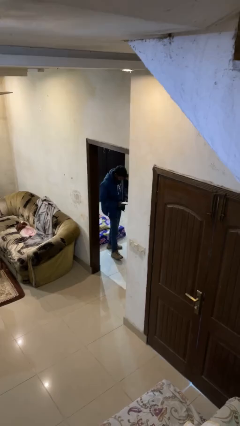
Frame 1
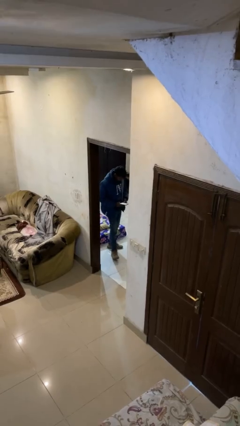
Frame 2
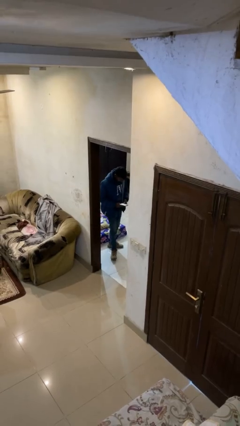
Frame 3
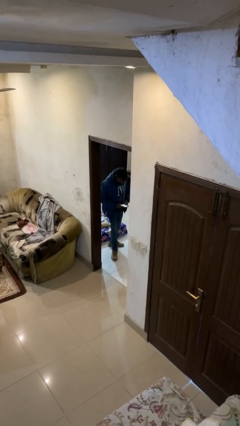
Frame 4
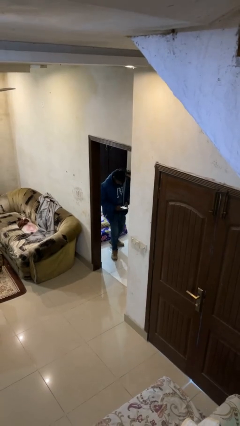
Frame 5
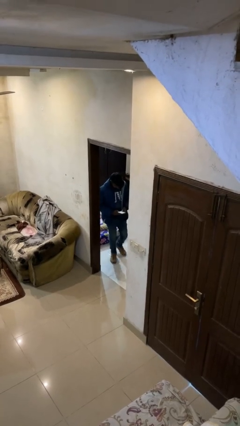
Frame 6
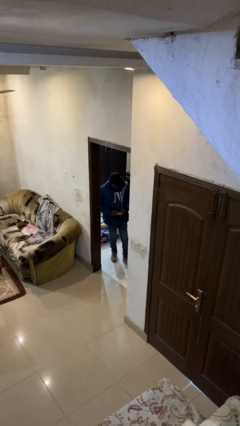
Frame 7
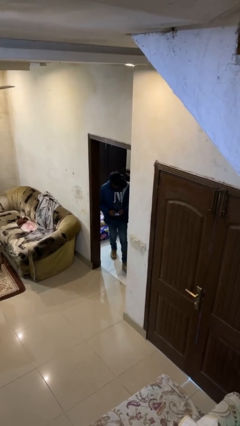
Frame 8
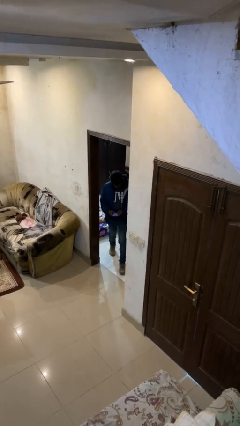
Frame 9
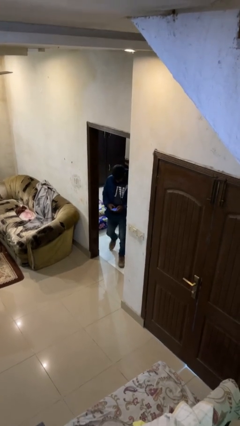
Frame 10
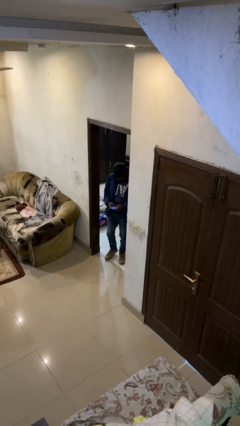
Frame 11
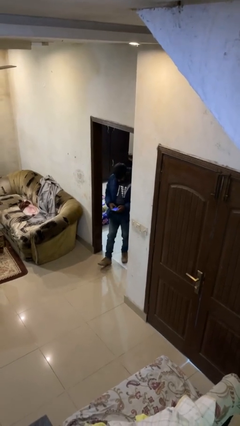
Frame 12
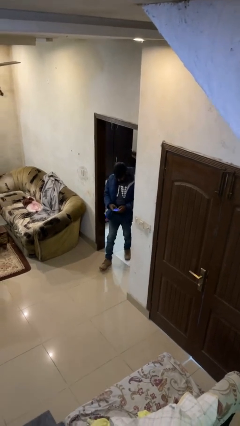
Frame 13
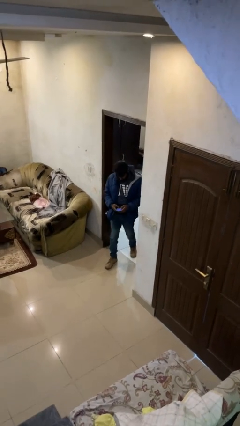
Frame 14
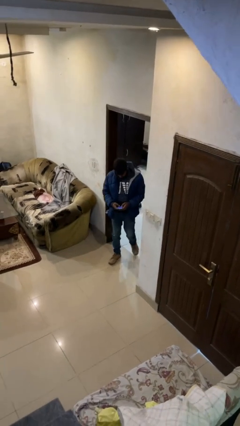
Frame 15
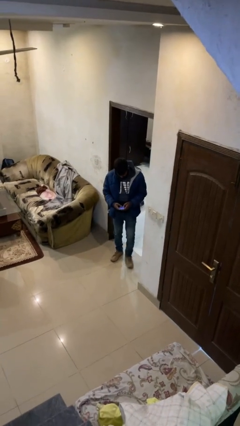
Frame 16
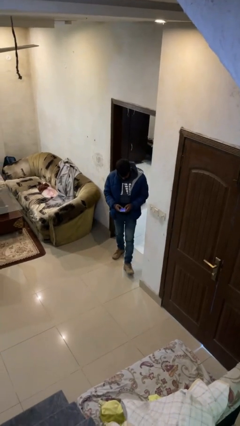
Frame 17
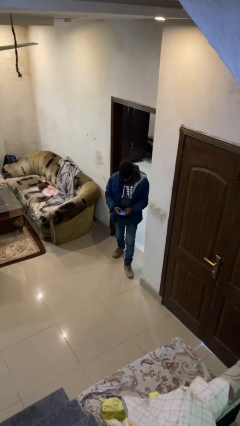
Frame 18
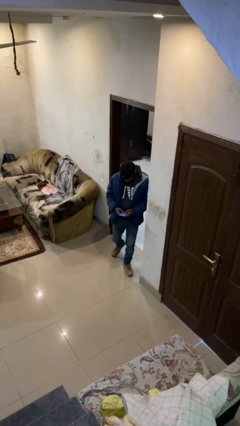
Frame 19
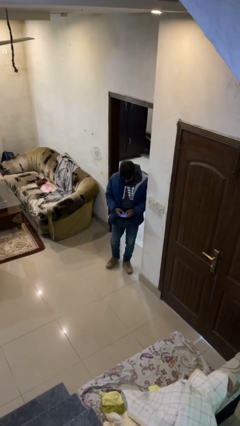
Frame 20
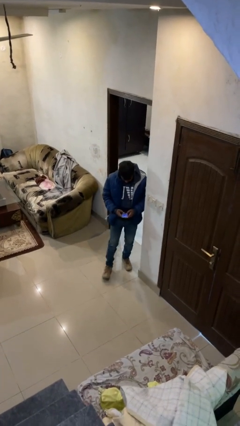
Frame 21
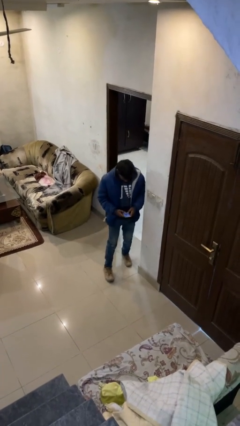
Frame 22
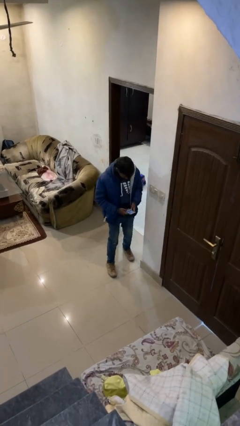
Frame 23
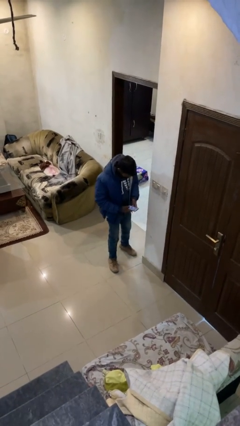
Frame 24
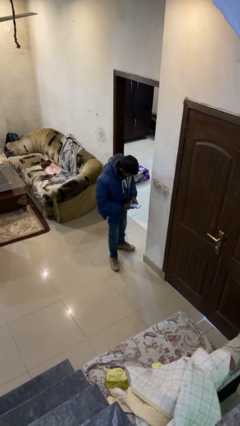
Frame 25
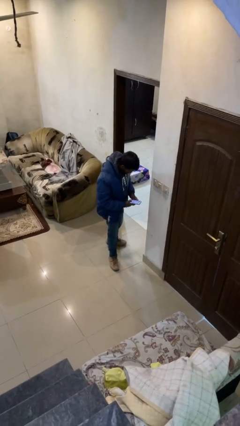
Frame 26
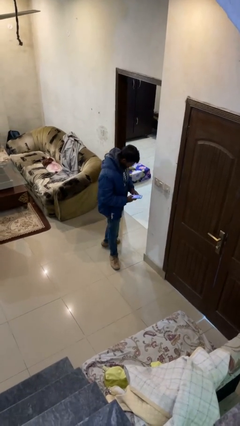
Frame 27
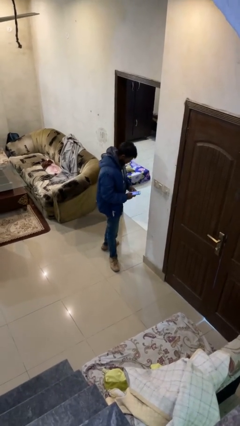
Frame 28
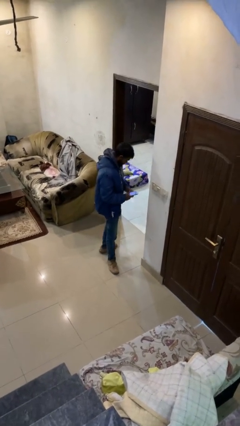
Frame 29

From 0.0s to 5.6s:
person enters scene through structure

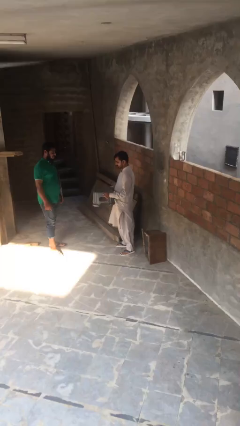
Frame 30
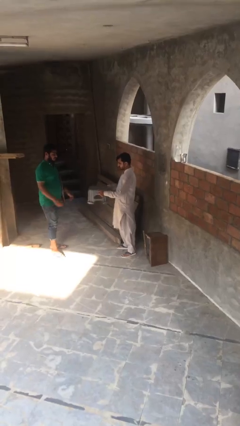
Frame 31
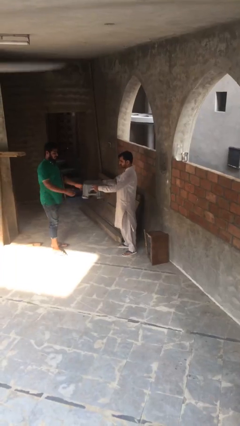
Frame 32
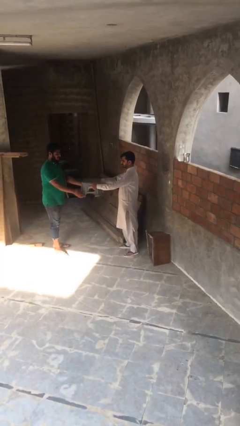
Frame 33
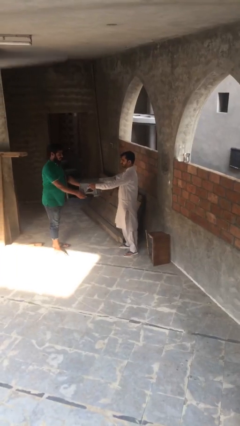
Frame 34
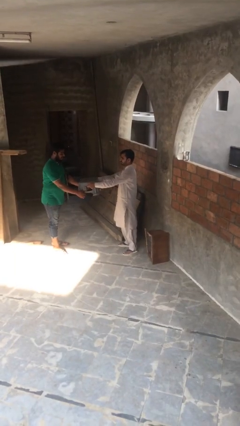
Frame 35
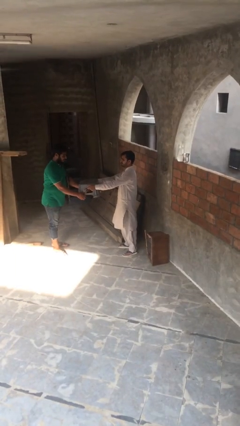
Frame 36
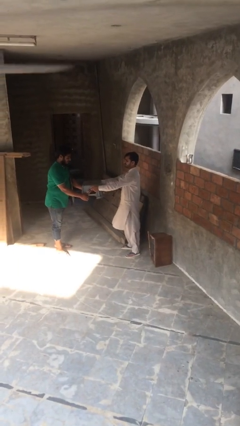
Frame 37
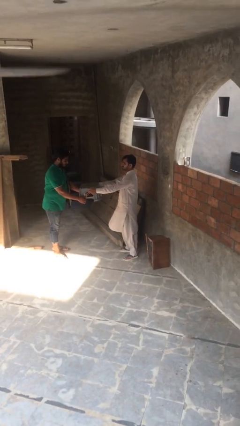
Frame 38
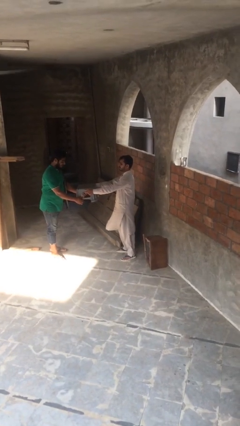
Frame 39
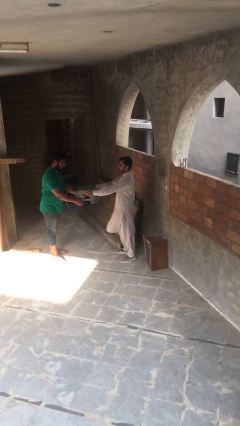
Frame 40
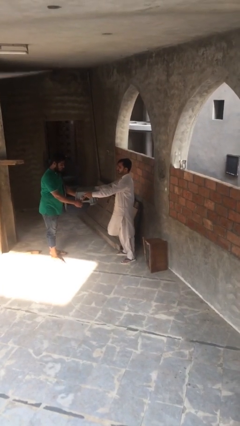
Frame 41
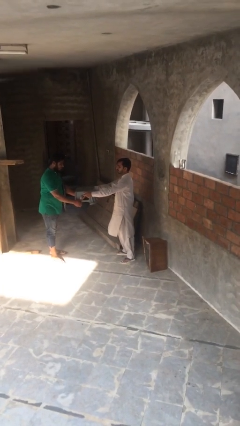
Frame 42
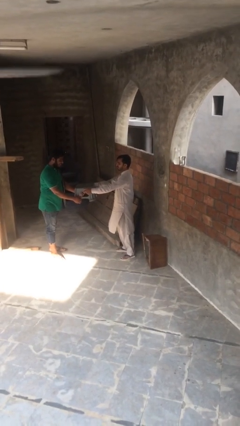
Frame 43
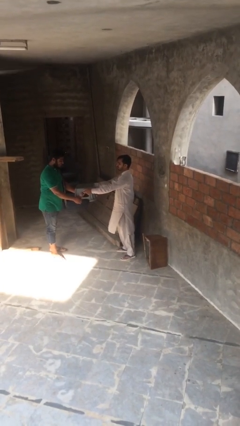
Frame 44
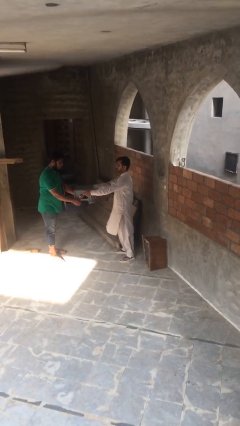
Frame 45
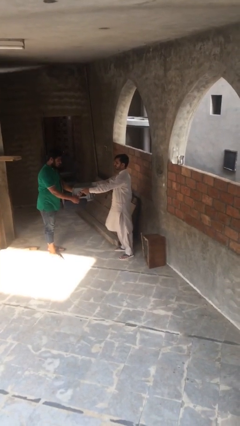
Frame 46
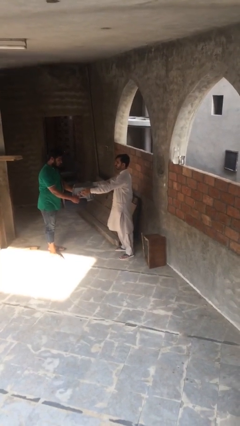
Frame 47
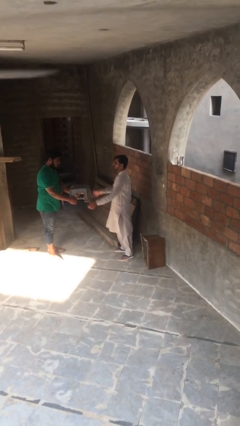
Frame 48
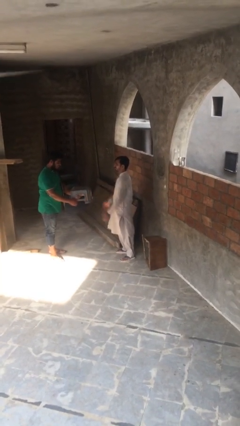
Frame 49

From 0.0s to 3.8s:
person transfers object to person

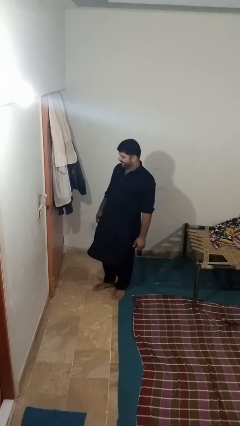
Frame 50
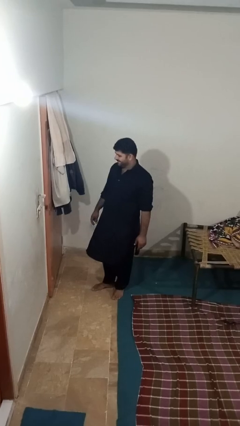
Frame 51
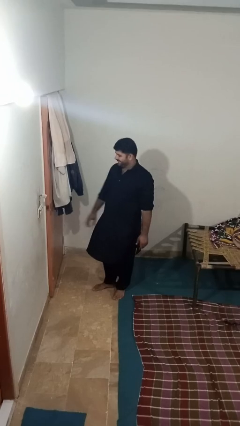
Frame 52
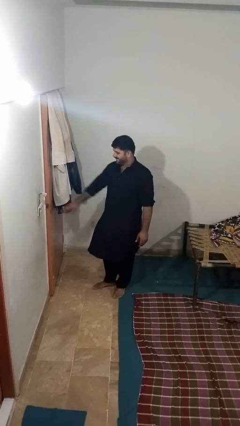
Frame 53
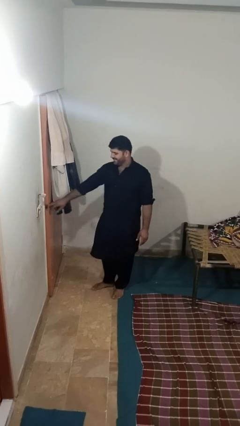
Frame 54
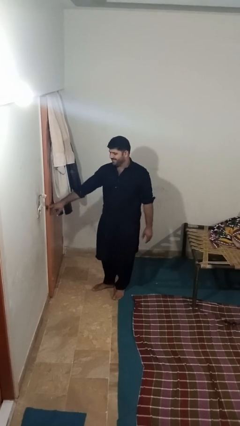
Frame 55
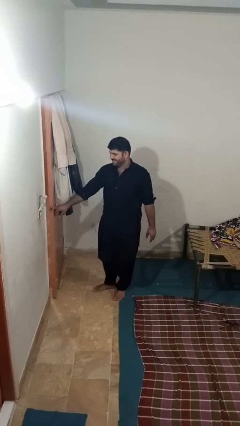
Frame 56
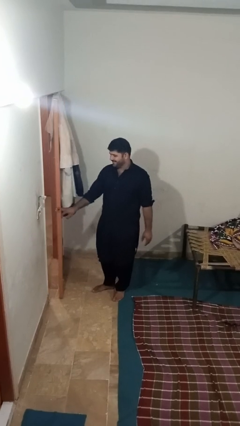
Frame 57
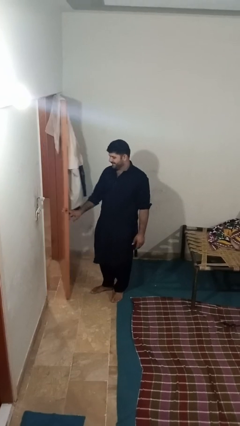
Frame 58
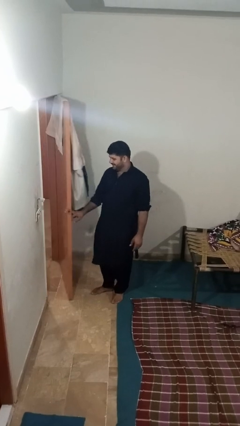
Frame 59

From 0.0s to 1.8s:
person opens facility door

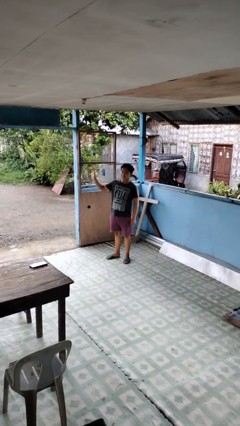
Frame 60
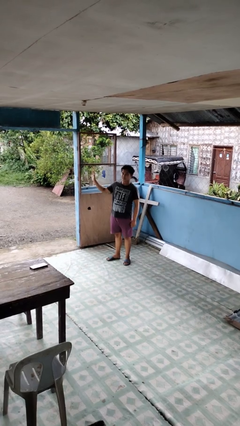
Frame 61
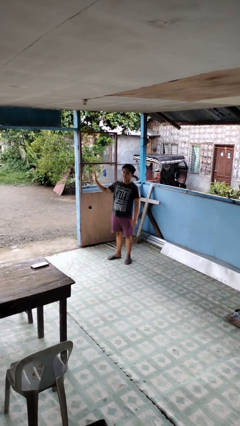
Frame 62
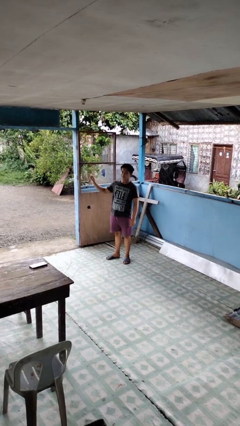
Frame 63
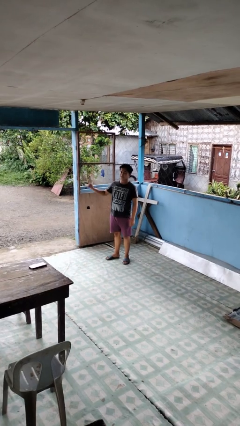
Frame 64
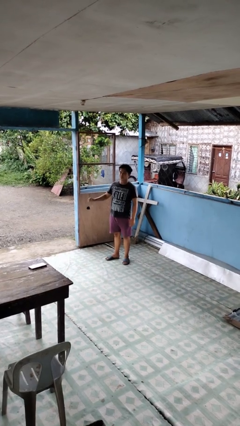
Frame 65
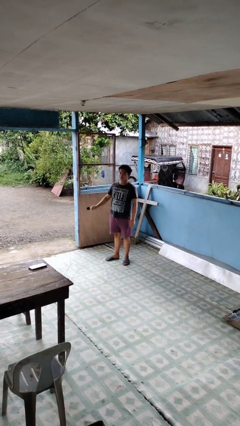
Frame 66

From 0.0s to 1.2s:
person gestures swipe right

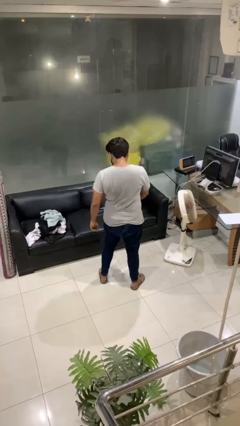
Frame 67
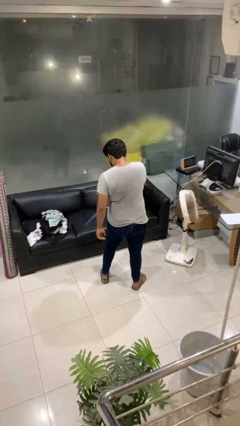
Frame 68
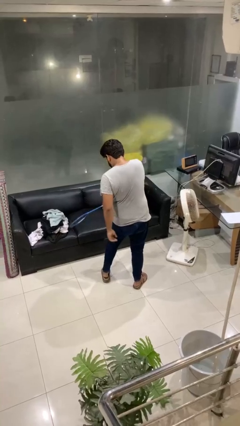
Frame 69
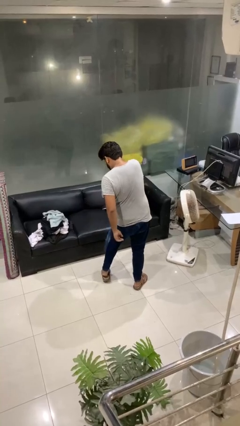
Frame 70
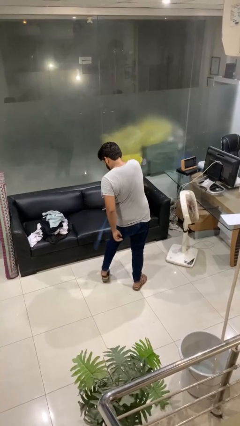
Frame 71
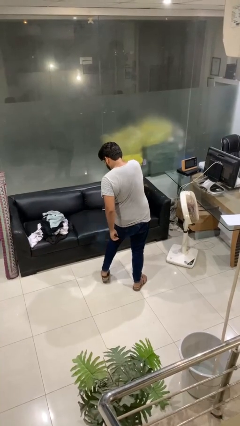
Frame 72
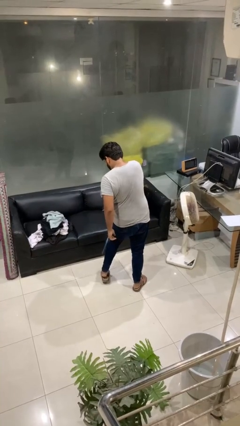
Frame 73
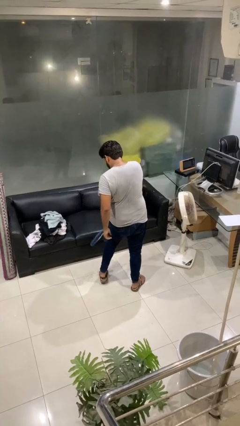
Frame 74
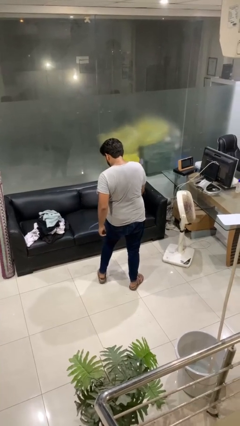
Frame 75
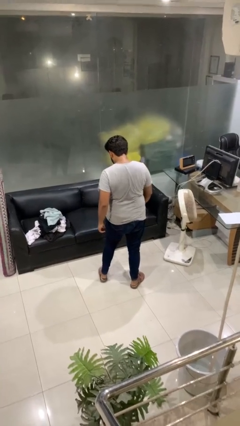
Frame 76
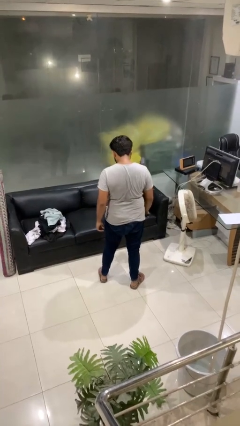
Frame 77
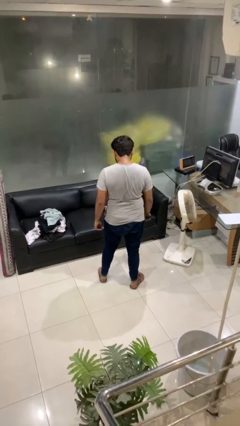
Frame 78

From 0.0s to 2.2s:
person swats bug

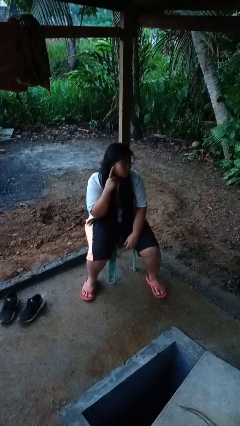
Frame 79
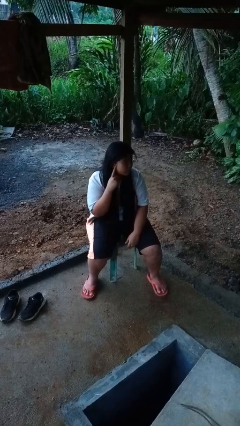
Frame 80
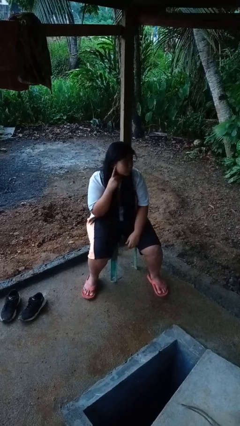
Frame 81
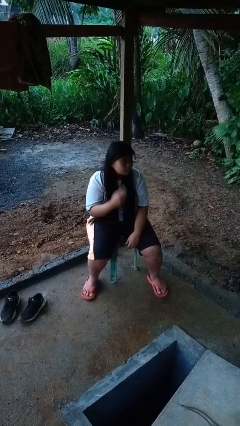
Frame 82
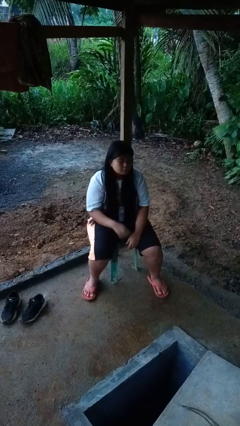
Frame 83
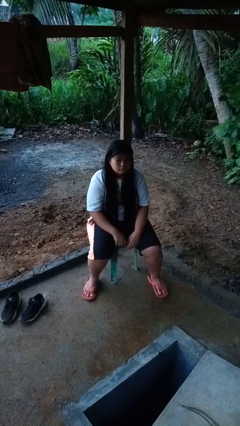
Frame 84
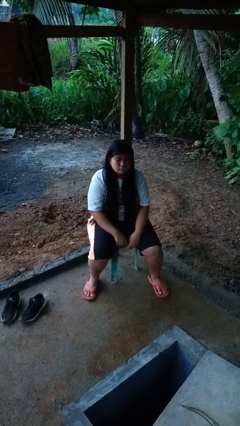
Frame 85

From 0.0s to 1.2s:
person gestures listen closely

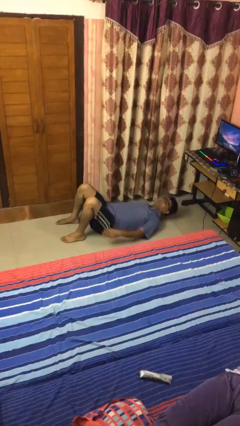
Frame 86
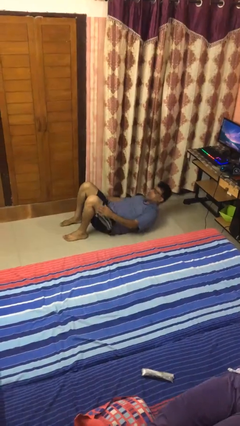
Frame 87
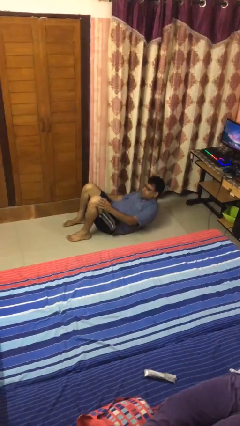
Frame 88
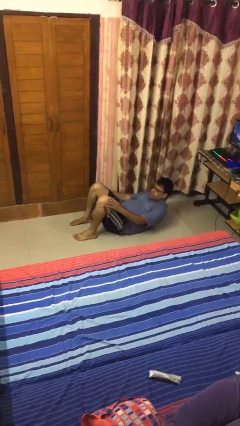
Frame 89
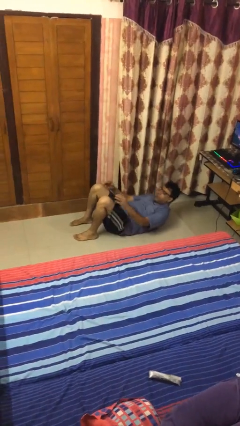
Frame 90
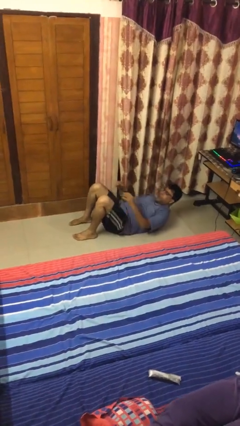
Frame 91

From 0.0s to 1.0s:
person exercises with situp
